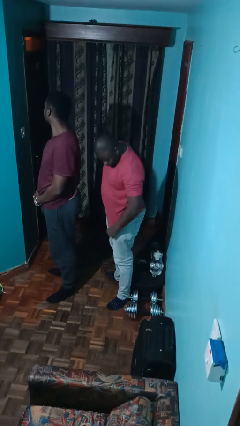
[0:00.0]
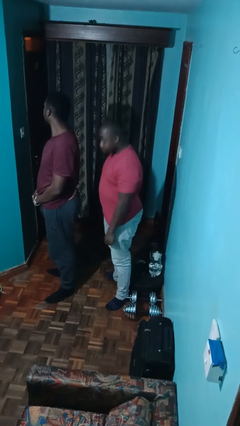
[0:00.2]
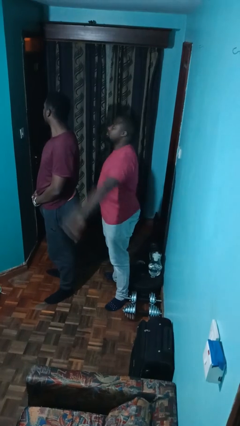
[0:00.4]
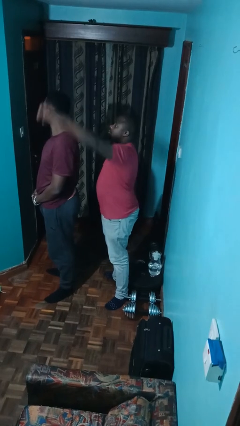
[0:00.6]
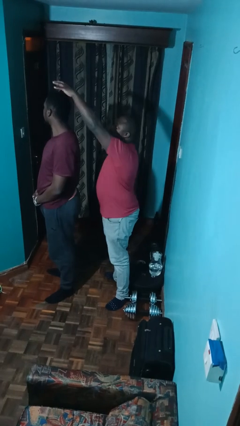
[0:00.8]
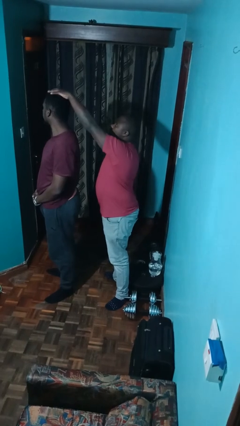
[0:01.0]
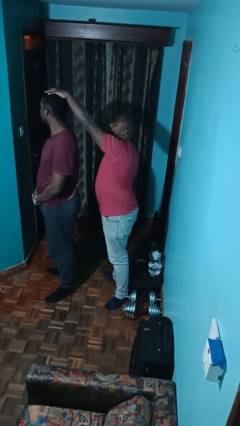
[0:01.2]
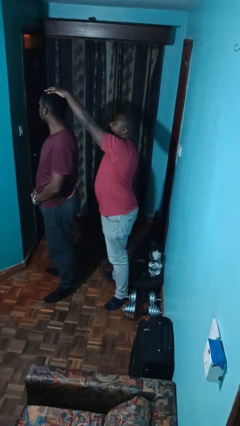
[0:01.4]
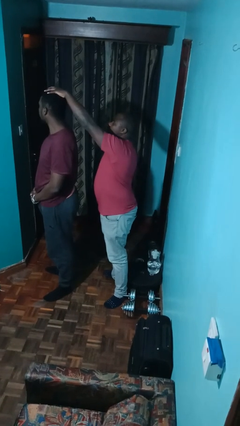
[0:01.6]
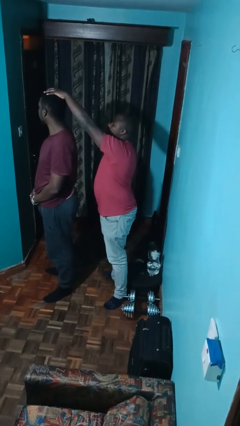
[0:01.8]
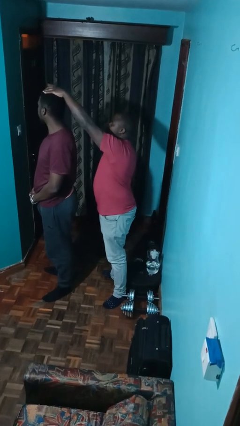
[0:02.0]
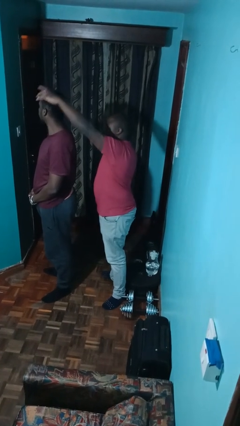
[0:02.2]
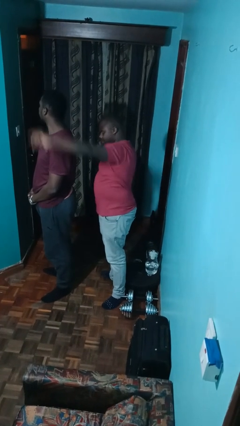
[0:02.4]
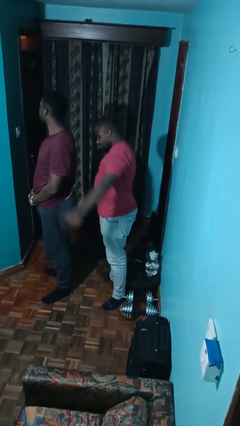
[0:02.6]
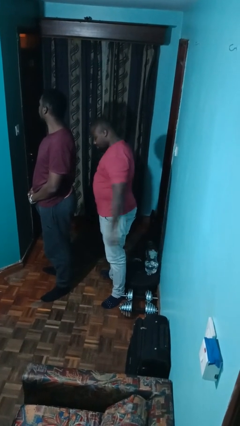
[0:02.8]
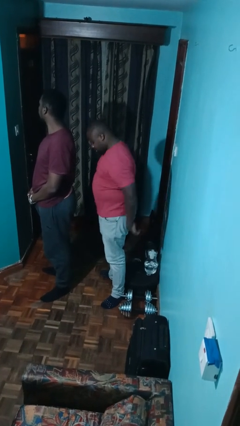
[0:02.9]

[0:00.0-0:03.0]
person grabs person by hair

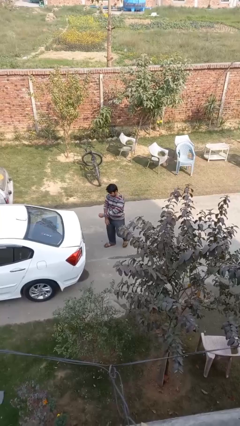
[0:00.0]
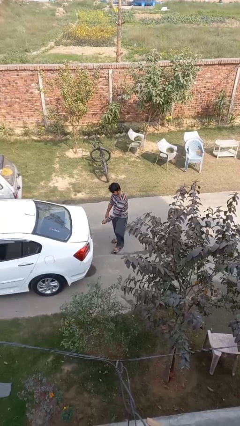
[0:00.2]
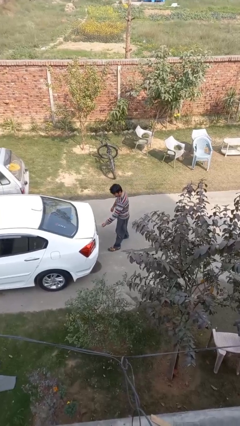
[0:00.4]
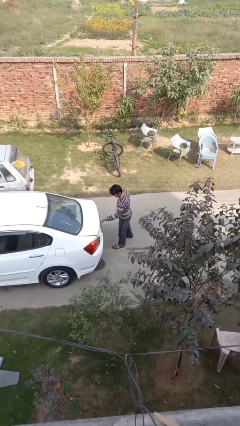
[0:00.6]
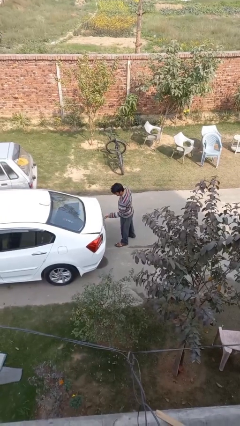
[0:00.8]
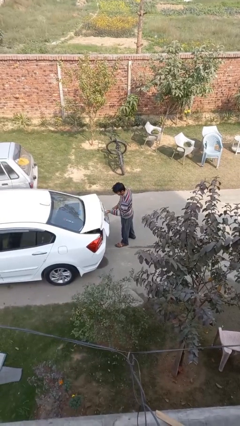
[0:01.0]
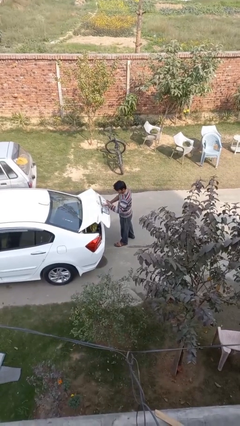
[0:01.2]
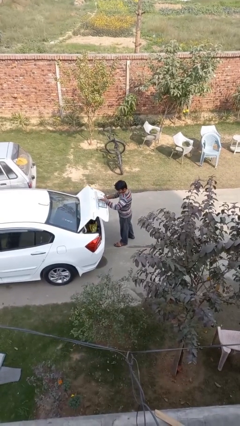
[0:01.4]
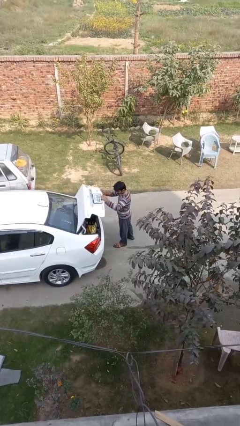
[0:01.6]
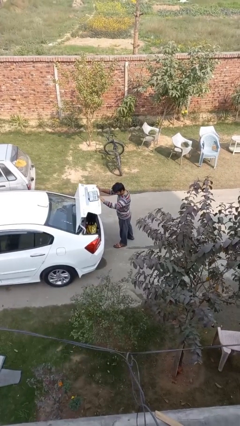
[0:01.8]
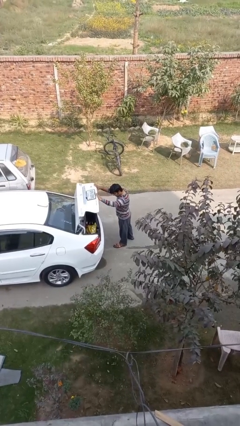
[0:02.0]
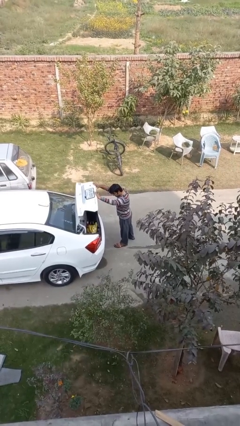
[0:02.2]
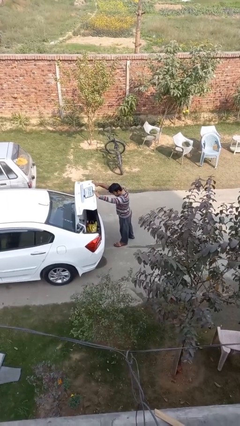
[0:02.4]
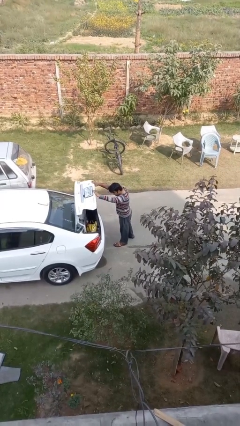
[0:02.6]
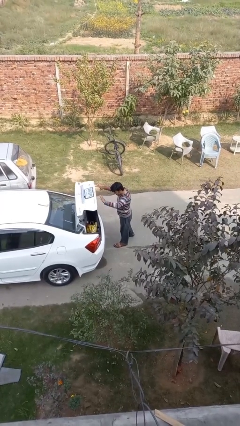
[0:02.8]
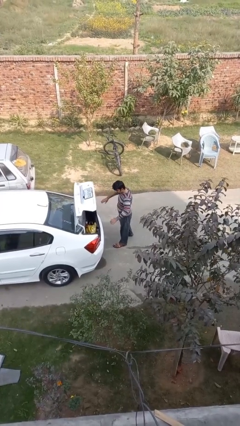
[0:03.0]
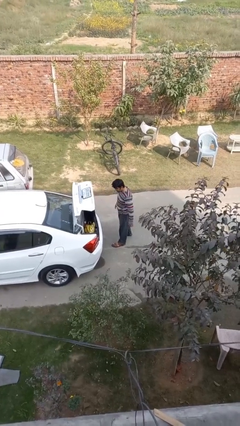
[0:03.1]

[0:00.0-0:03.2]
person opens car trunk

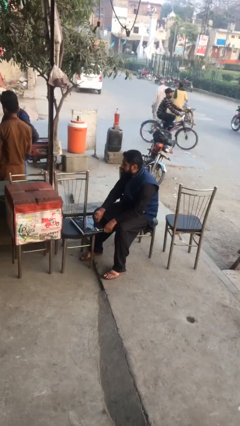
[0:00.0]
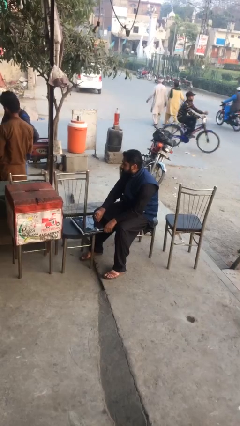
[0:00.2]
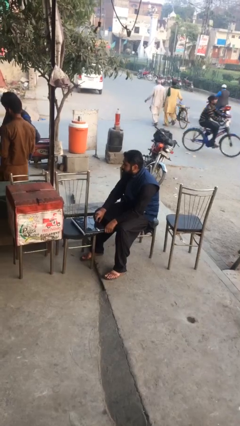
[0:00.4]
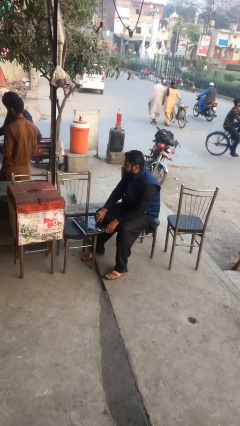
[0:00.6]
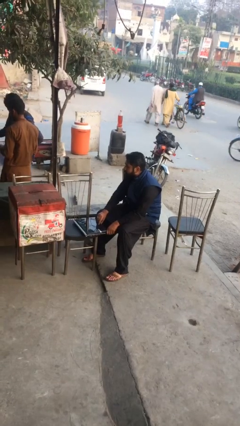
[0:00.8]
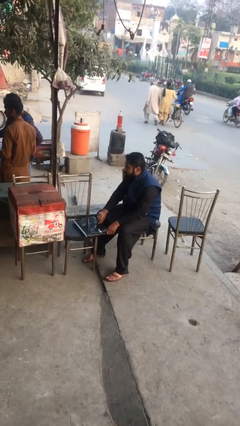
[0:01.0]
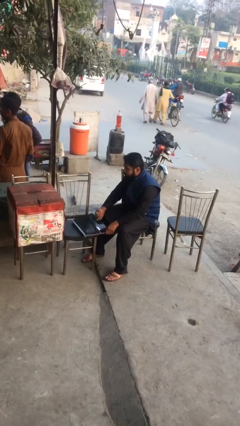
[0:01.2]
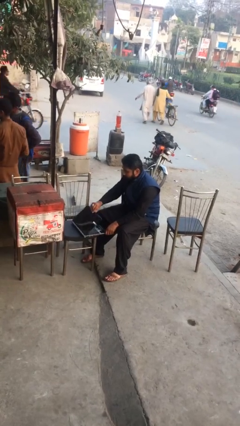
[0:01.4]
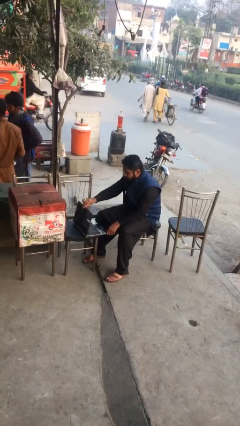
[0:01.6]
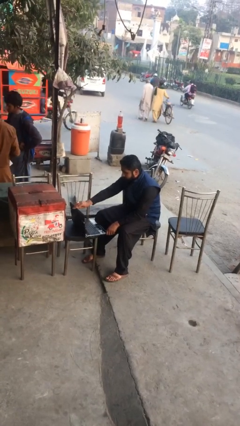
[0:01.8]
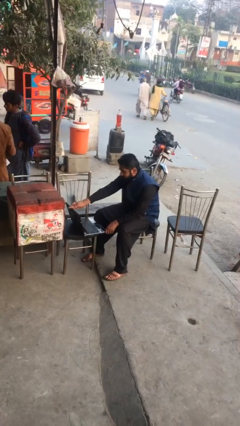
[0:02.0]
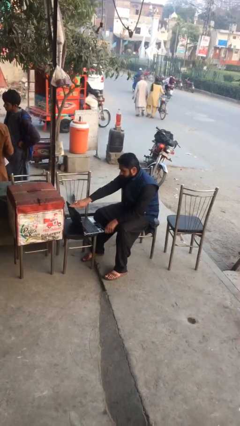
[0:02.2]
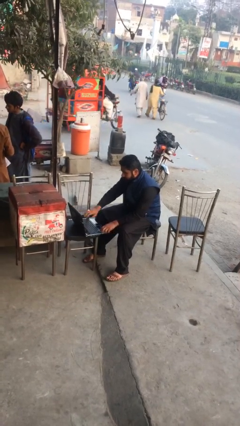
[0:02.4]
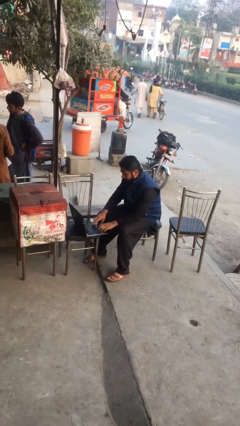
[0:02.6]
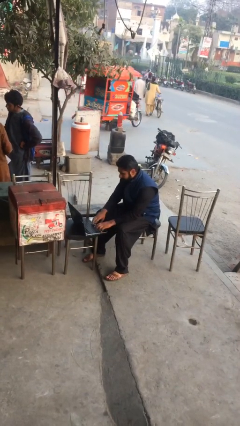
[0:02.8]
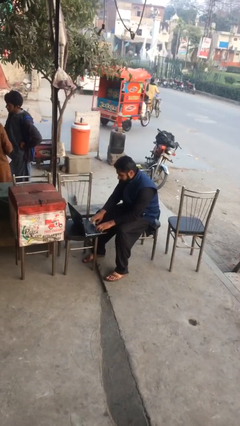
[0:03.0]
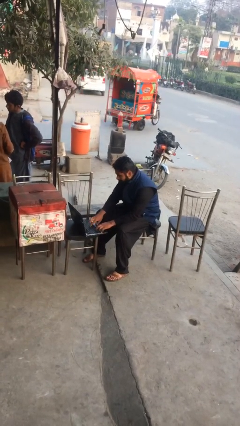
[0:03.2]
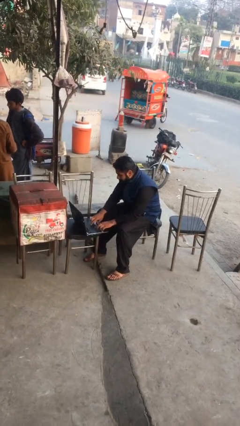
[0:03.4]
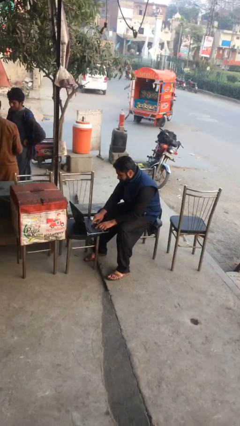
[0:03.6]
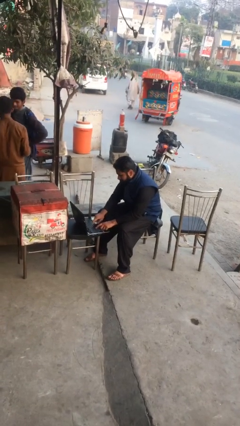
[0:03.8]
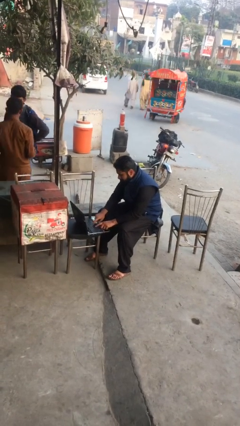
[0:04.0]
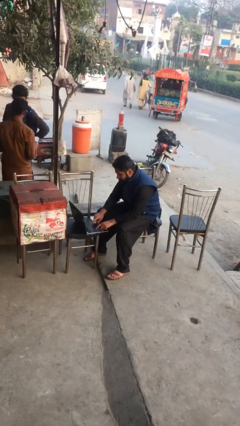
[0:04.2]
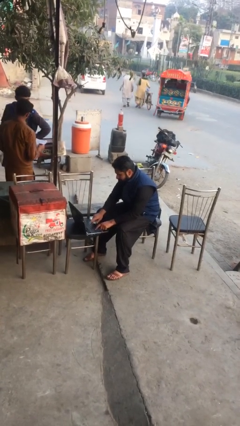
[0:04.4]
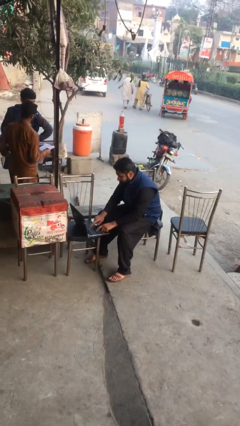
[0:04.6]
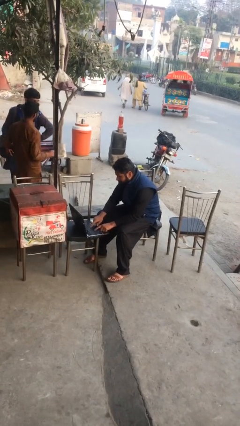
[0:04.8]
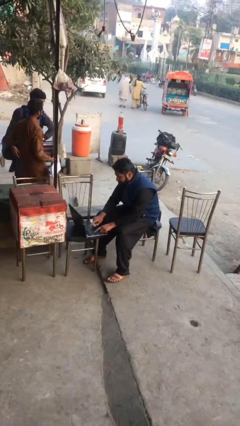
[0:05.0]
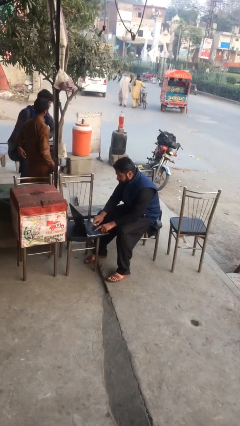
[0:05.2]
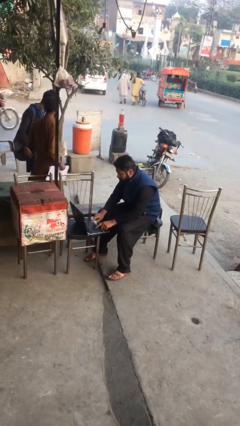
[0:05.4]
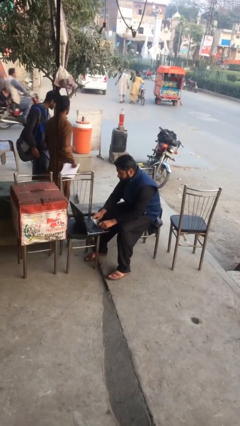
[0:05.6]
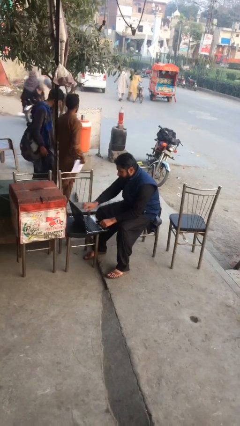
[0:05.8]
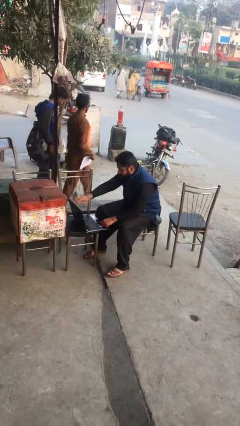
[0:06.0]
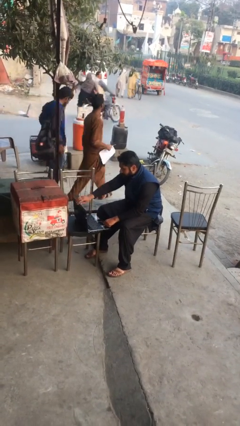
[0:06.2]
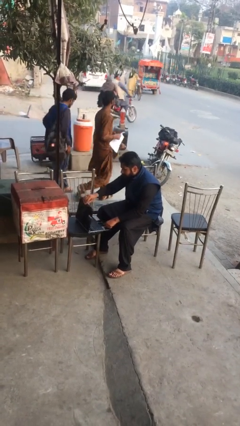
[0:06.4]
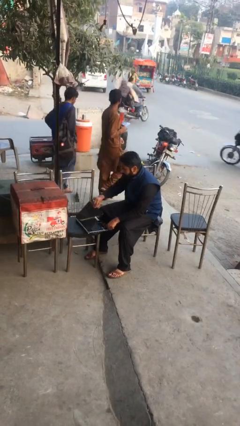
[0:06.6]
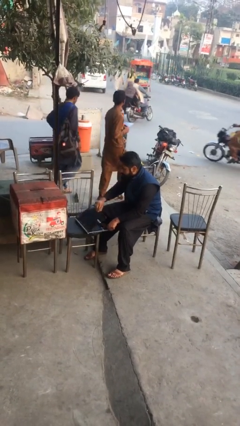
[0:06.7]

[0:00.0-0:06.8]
person interacts with laptop

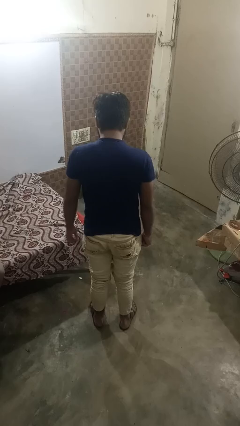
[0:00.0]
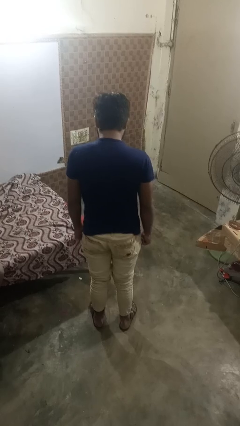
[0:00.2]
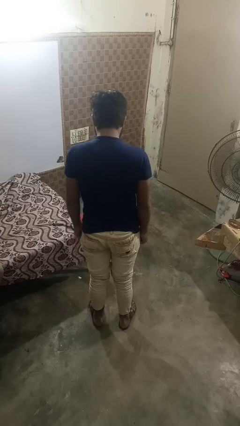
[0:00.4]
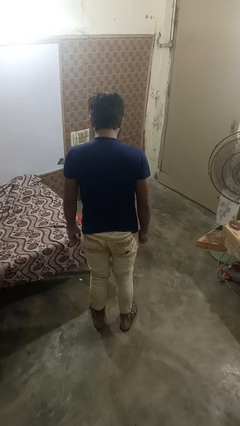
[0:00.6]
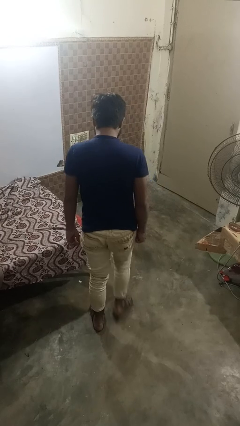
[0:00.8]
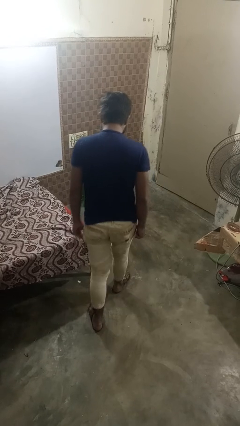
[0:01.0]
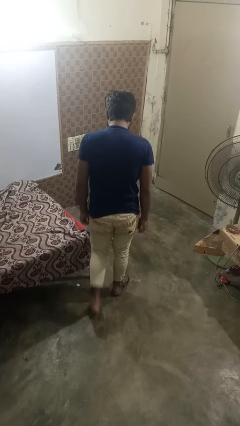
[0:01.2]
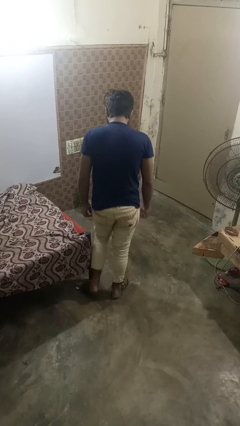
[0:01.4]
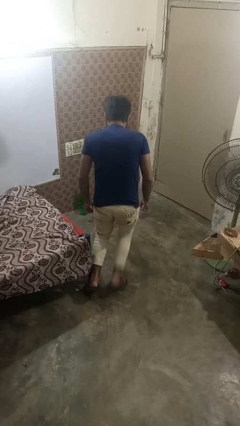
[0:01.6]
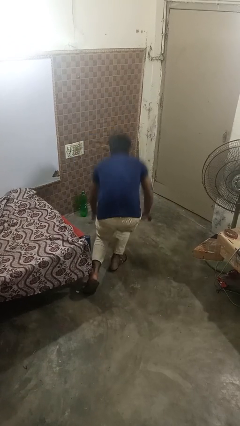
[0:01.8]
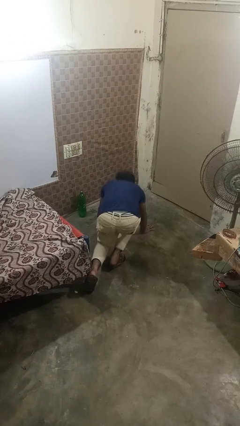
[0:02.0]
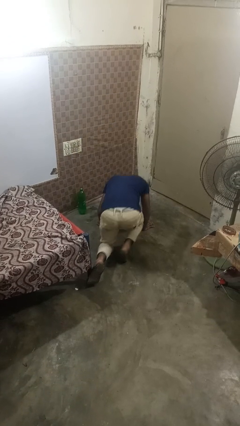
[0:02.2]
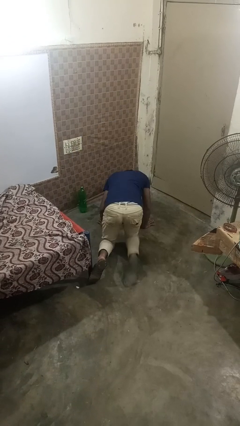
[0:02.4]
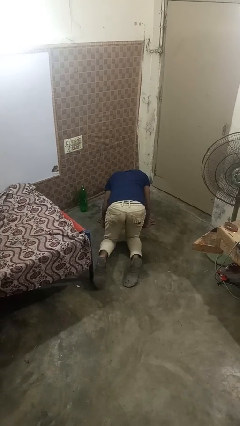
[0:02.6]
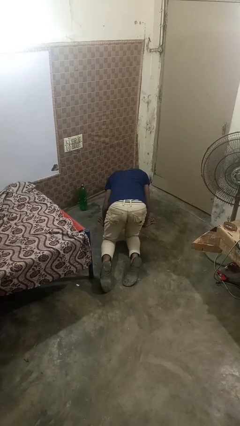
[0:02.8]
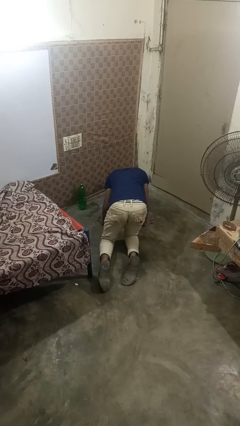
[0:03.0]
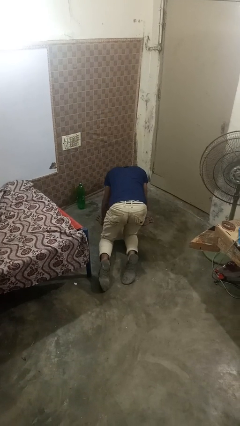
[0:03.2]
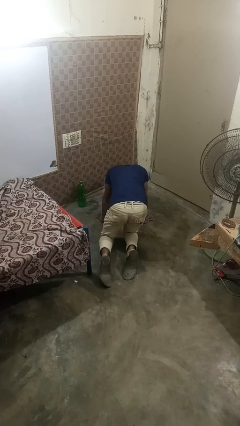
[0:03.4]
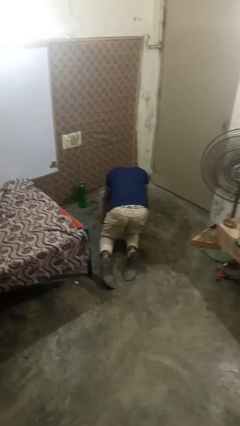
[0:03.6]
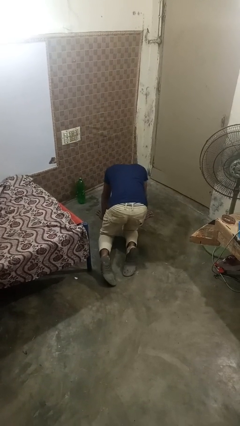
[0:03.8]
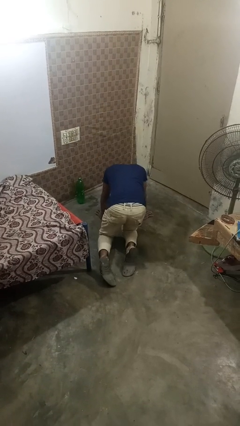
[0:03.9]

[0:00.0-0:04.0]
person trips on object on floor

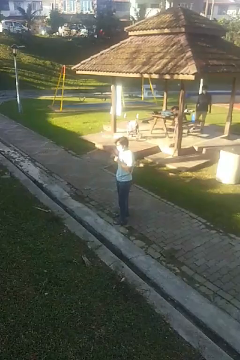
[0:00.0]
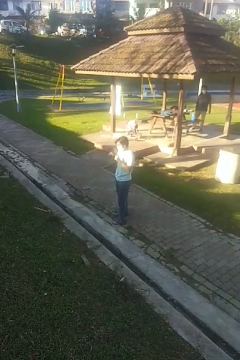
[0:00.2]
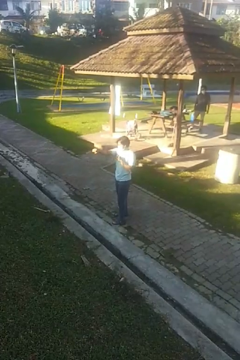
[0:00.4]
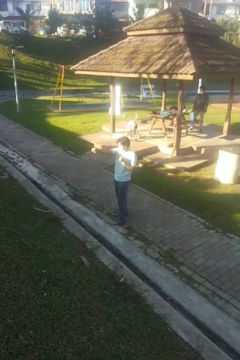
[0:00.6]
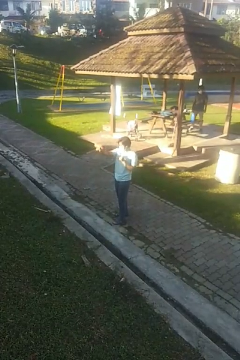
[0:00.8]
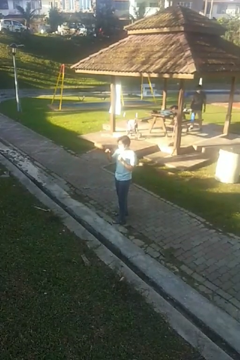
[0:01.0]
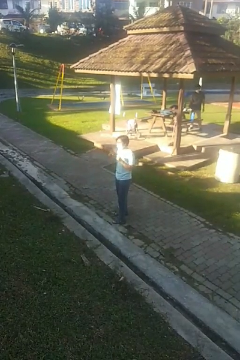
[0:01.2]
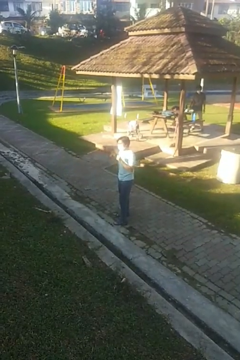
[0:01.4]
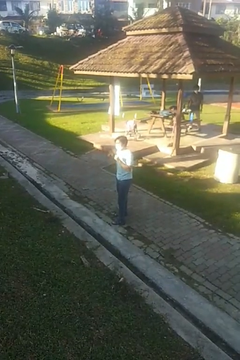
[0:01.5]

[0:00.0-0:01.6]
person punches
